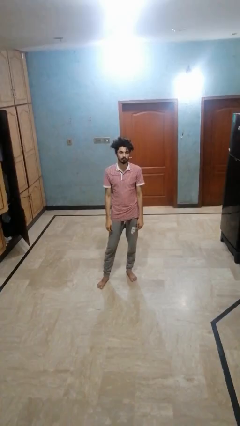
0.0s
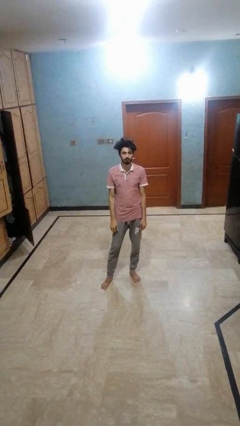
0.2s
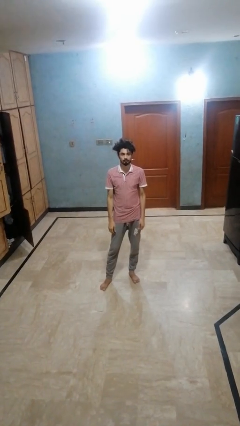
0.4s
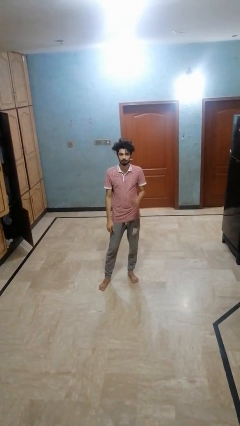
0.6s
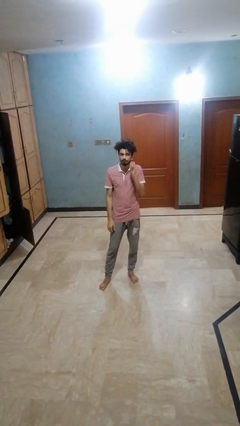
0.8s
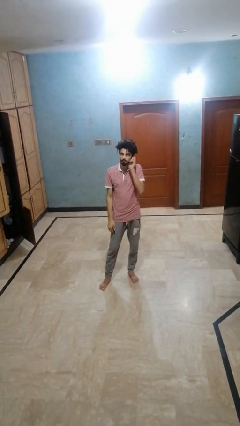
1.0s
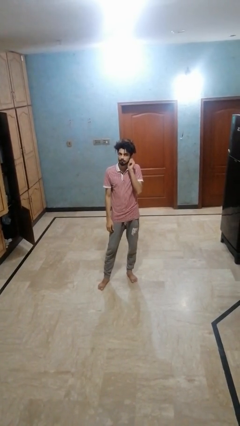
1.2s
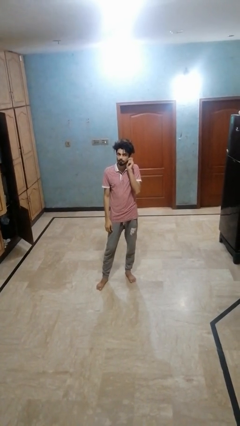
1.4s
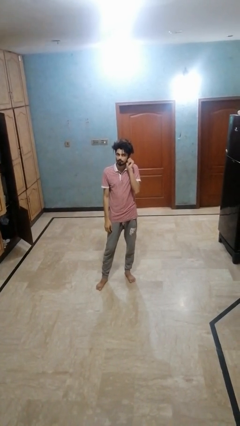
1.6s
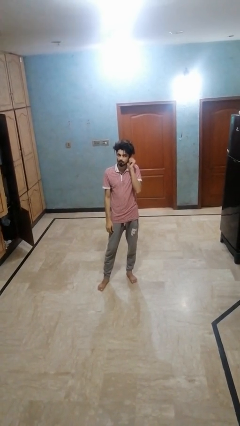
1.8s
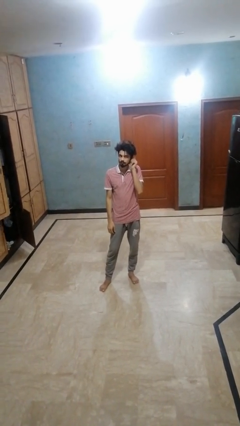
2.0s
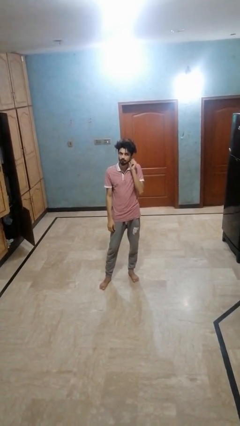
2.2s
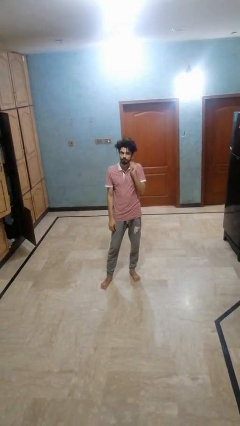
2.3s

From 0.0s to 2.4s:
person touches earlobe

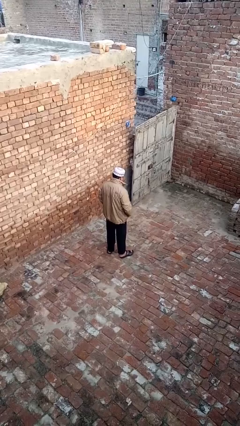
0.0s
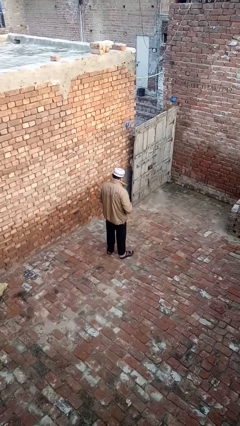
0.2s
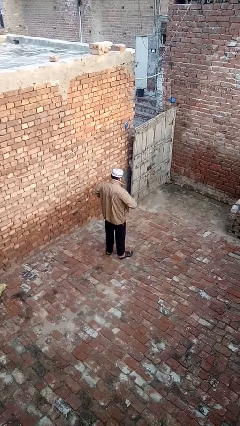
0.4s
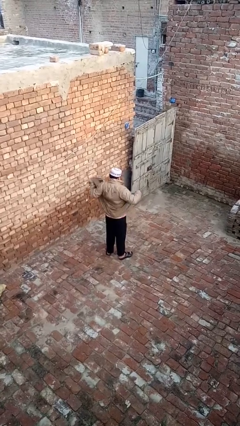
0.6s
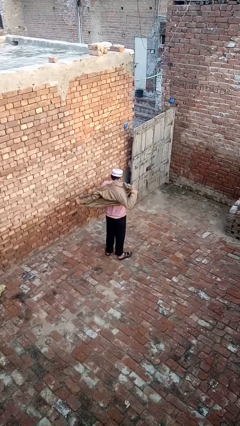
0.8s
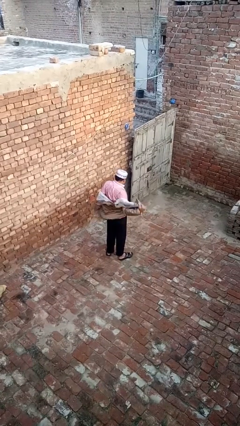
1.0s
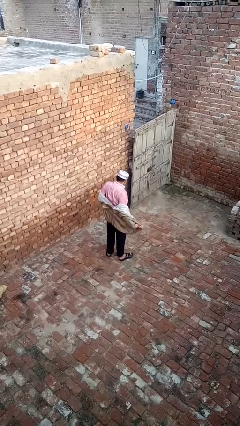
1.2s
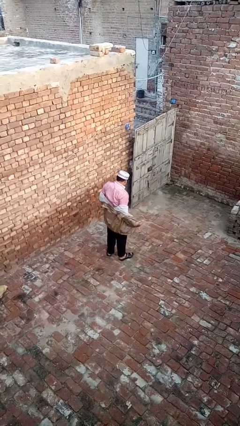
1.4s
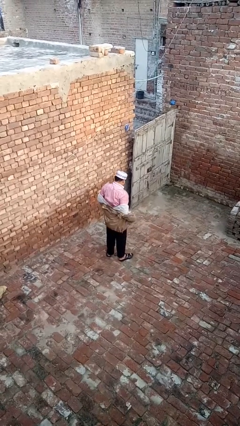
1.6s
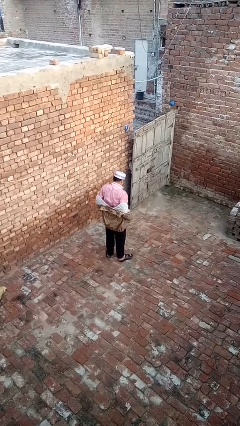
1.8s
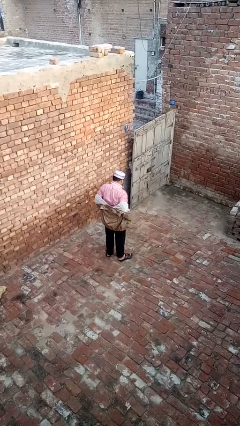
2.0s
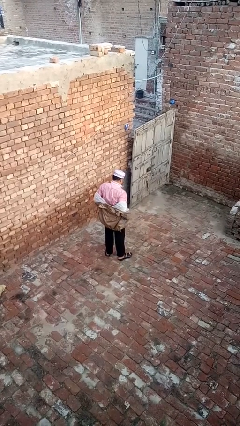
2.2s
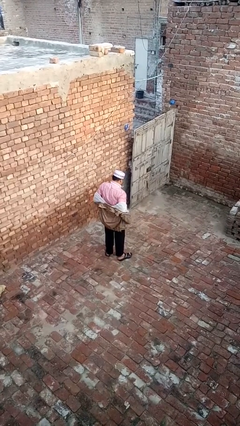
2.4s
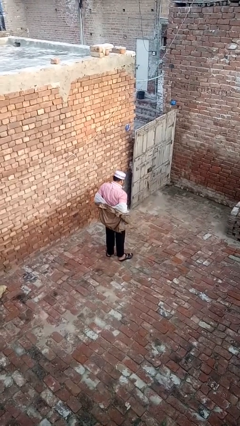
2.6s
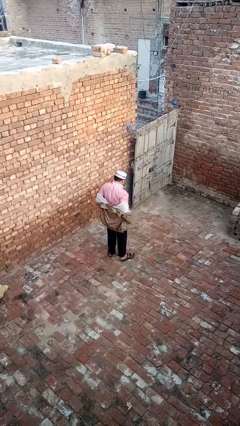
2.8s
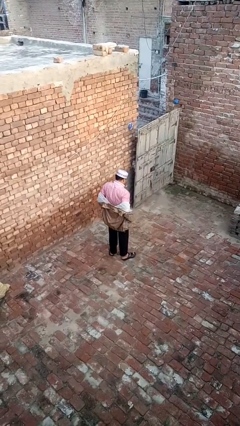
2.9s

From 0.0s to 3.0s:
person takes off jacket

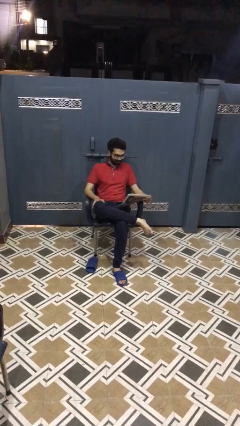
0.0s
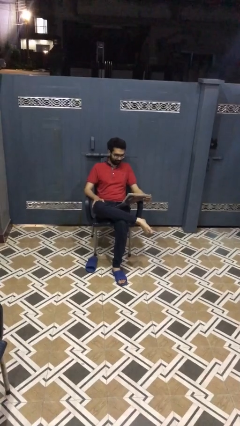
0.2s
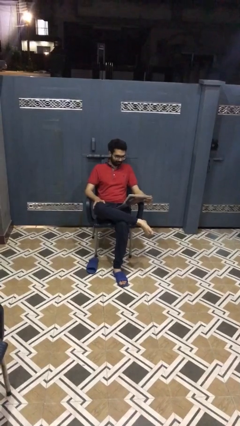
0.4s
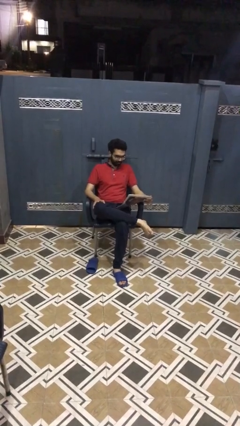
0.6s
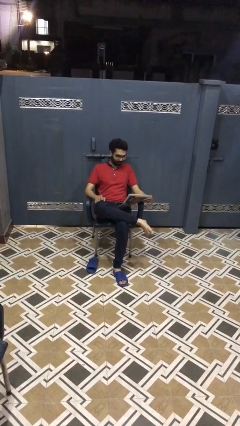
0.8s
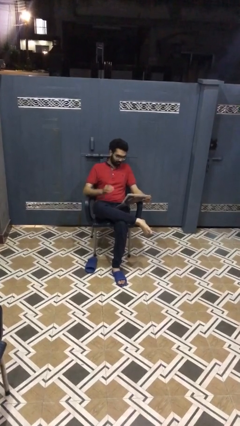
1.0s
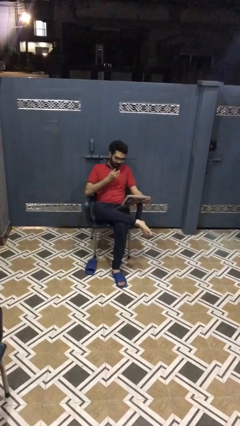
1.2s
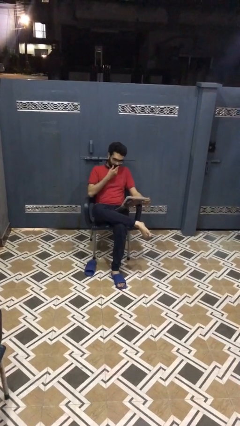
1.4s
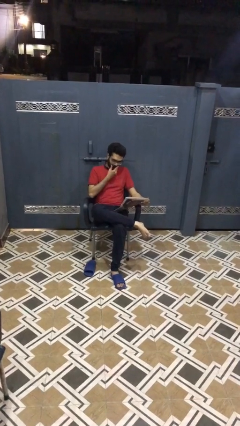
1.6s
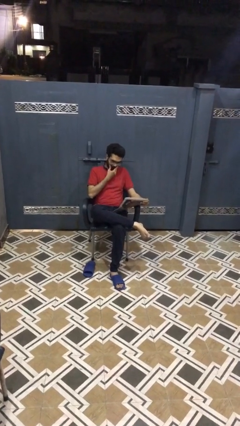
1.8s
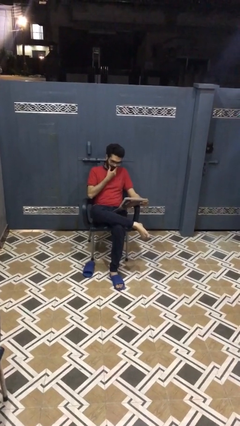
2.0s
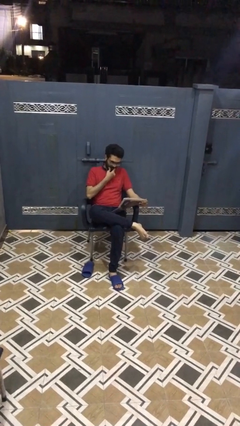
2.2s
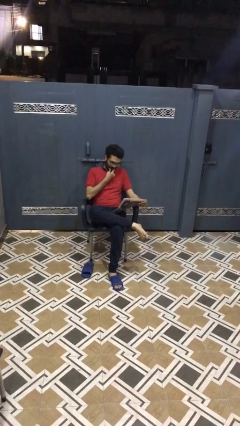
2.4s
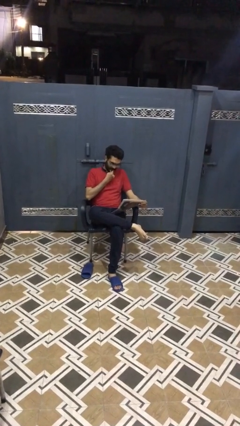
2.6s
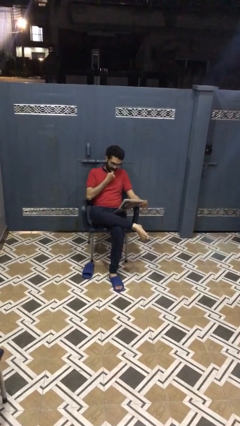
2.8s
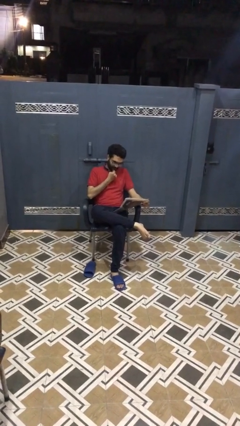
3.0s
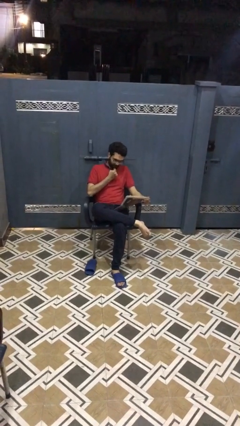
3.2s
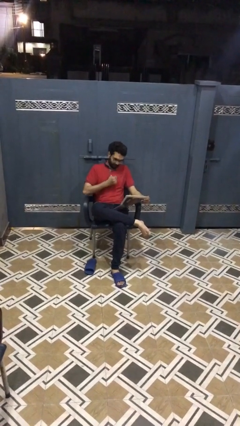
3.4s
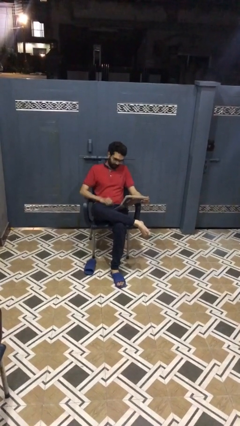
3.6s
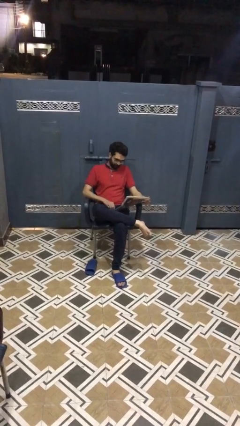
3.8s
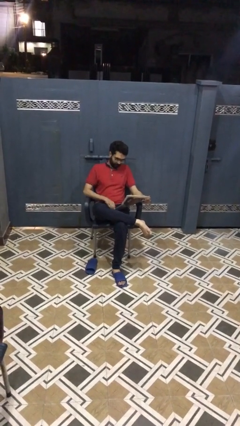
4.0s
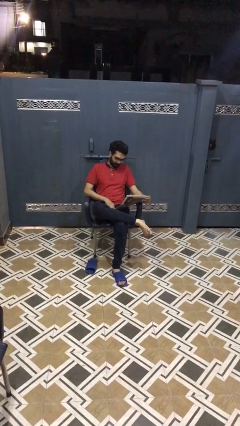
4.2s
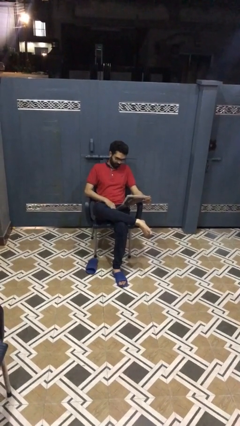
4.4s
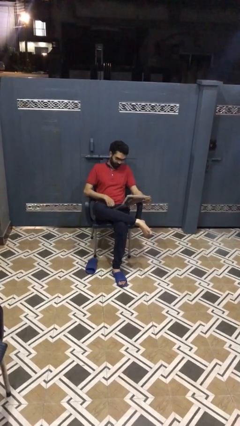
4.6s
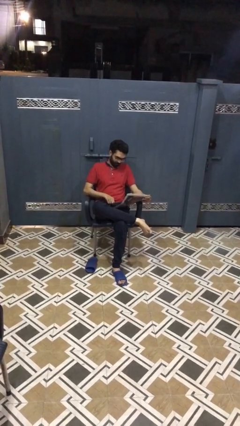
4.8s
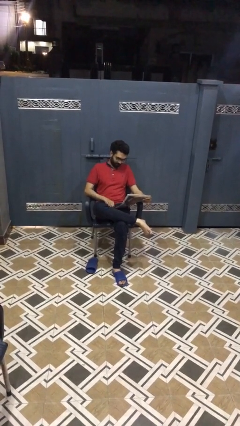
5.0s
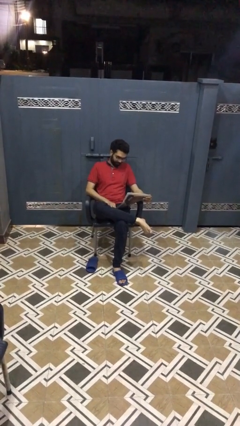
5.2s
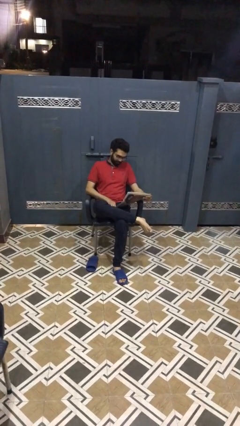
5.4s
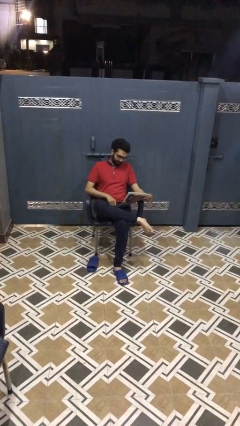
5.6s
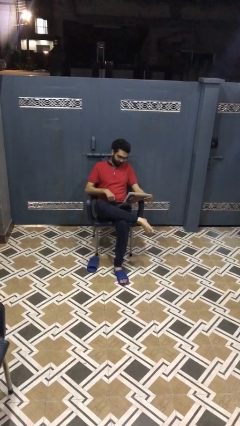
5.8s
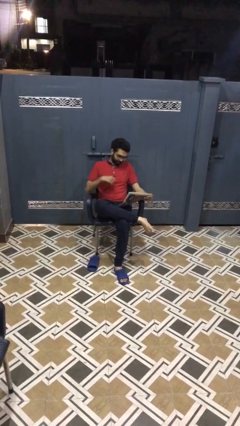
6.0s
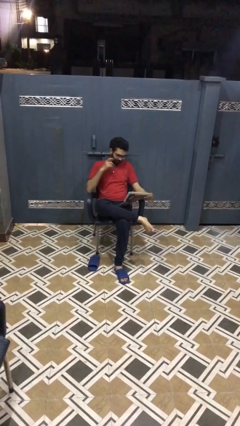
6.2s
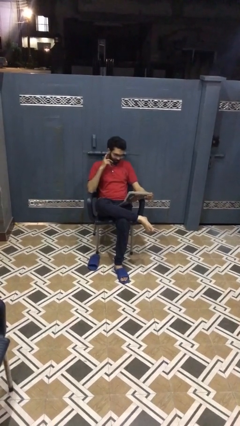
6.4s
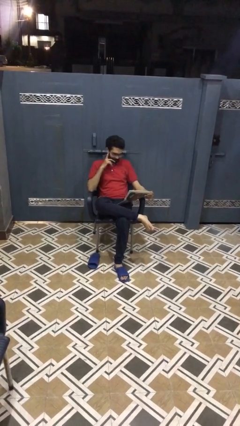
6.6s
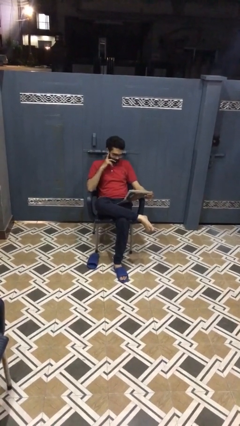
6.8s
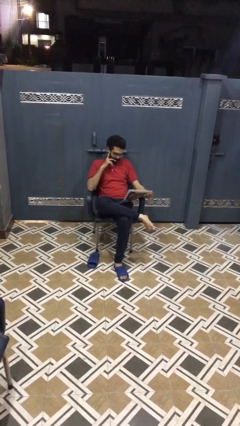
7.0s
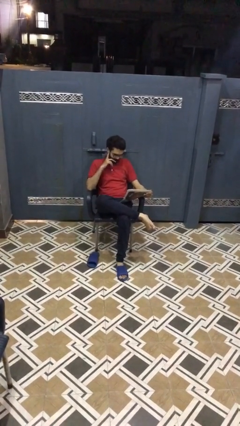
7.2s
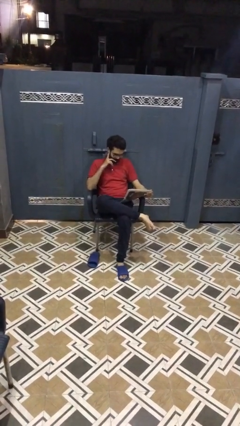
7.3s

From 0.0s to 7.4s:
person reads document

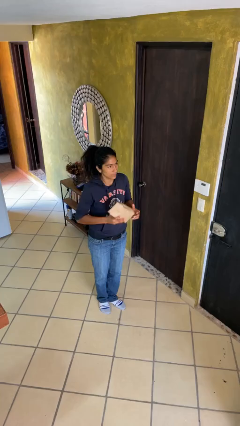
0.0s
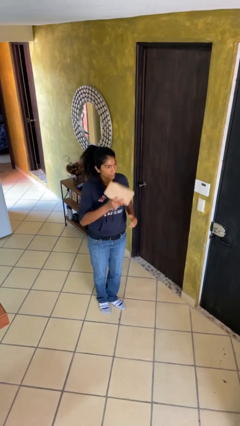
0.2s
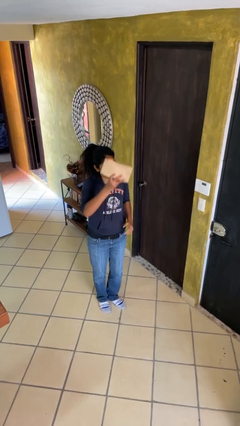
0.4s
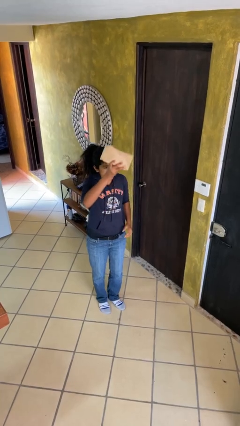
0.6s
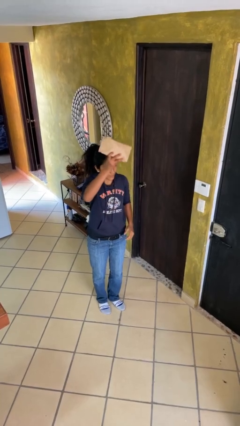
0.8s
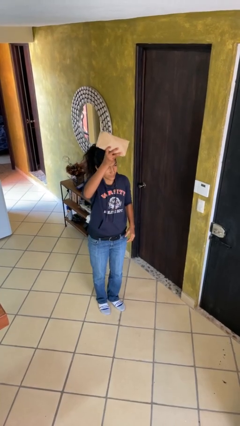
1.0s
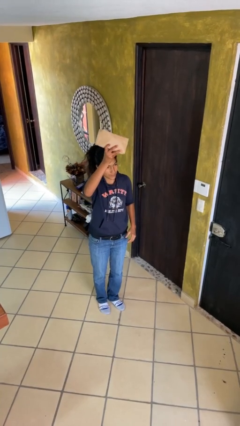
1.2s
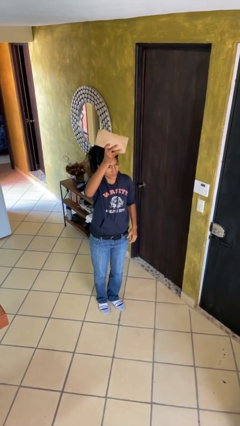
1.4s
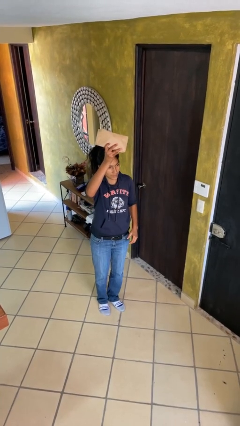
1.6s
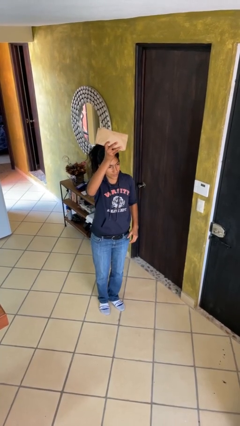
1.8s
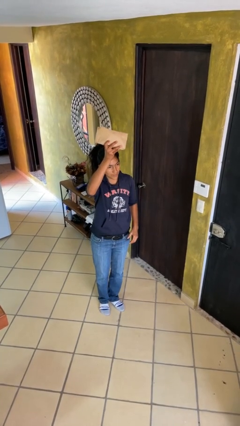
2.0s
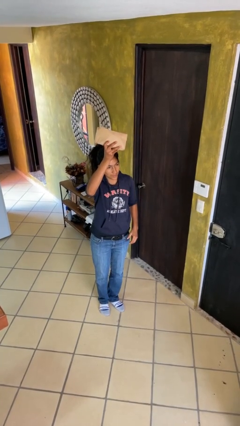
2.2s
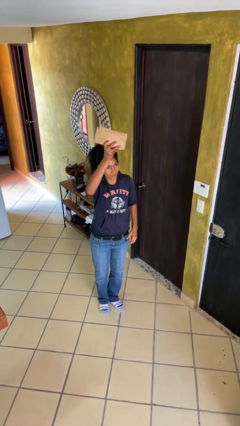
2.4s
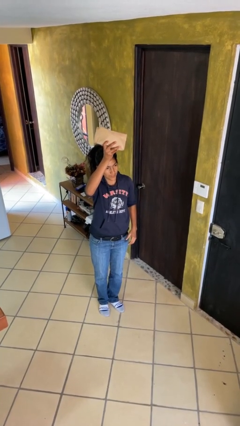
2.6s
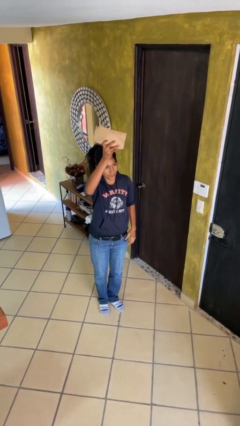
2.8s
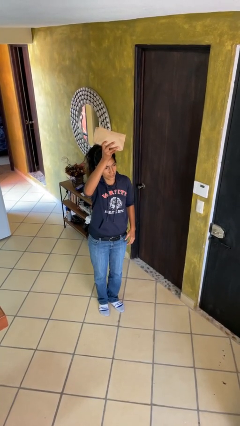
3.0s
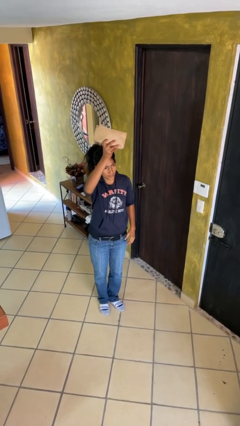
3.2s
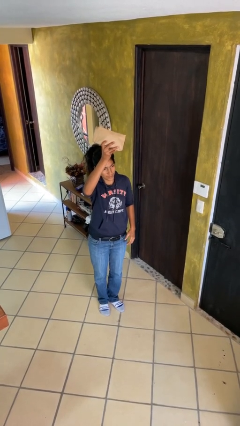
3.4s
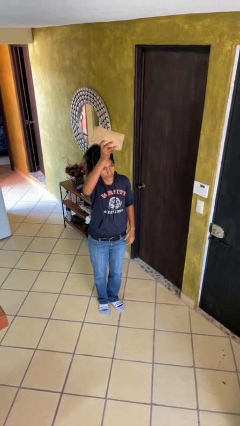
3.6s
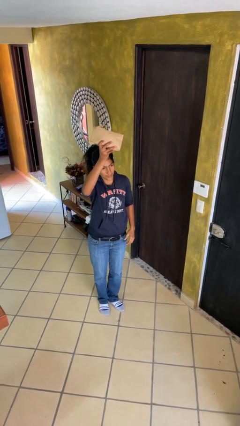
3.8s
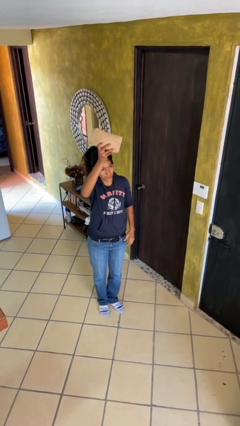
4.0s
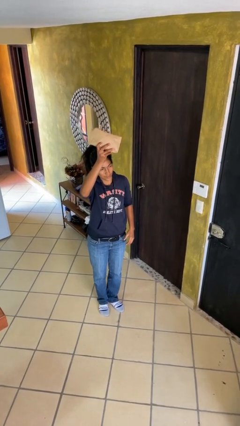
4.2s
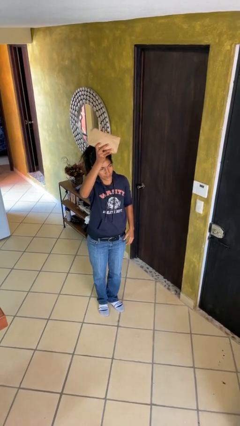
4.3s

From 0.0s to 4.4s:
person holds object above head

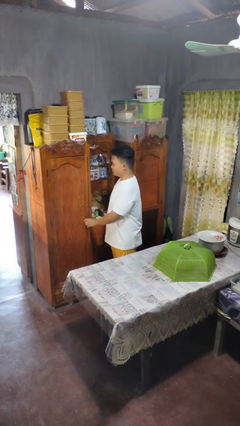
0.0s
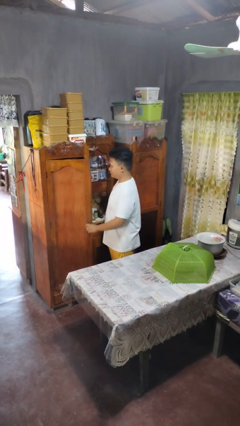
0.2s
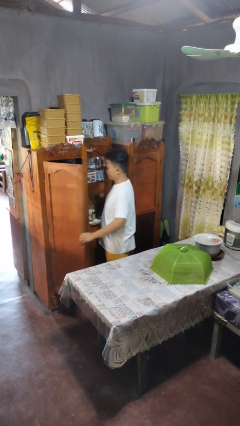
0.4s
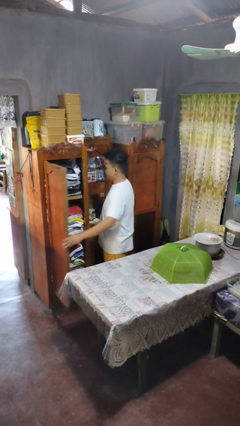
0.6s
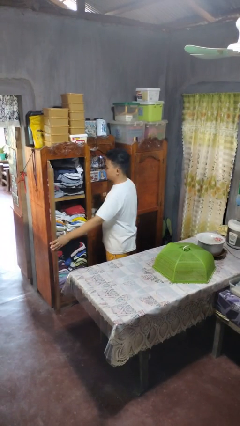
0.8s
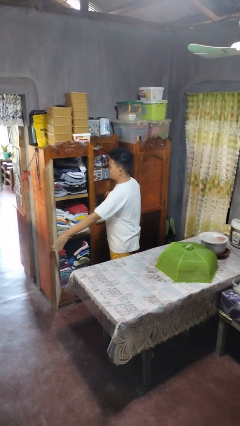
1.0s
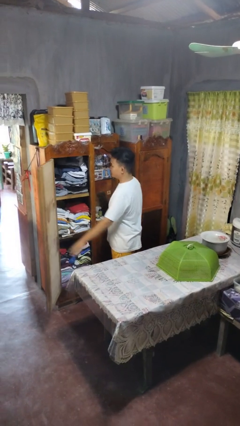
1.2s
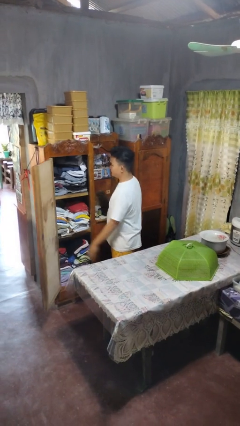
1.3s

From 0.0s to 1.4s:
person opens closet door
